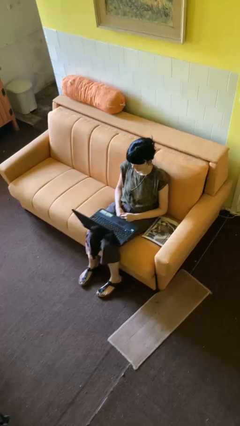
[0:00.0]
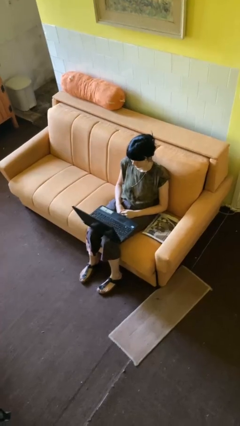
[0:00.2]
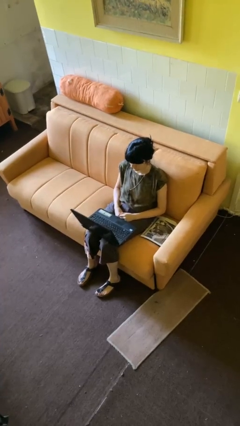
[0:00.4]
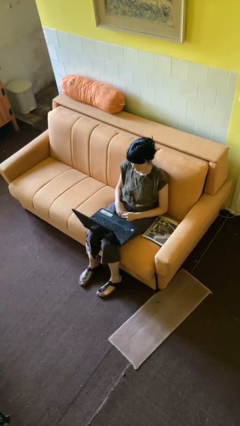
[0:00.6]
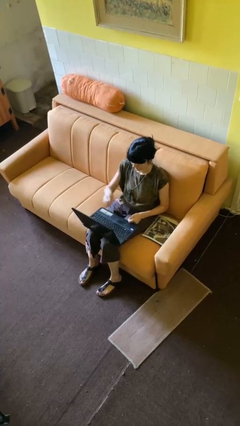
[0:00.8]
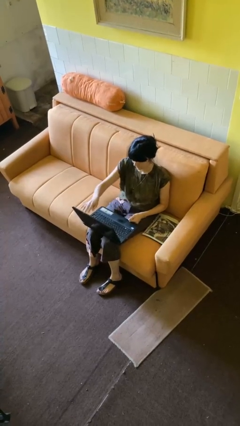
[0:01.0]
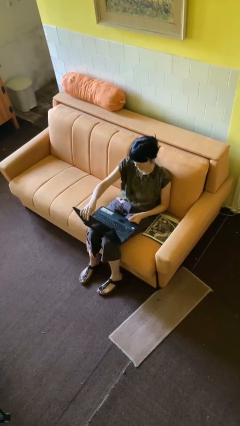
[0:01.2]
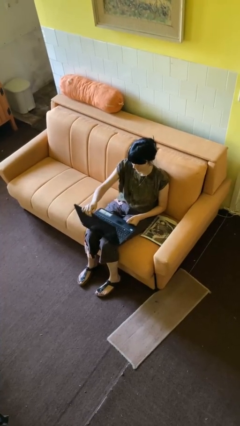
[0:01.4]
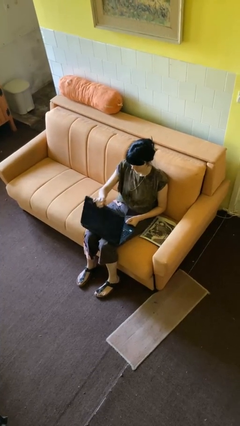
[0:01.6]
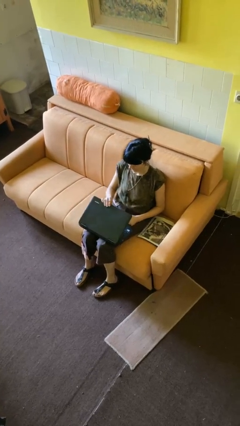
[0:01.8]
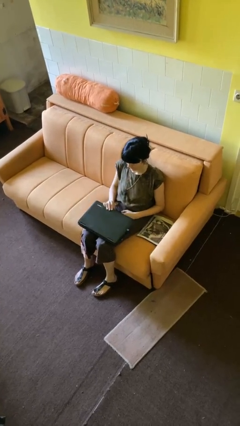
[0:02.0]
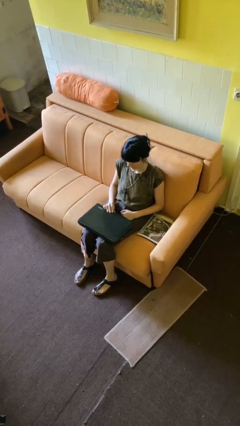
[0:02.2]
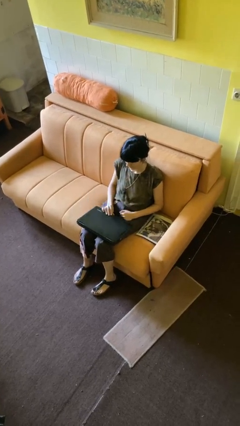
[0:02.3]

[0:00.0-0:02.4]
person closes laptop

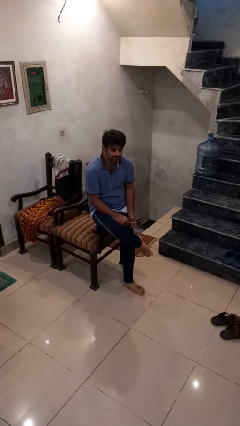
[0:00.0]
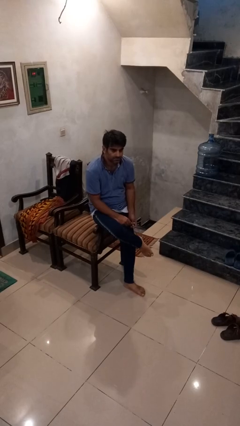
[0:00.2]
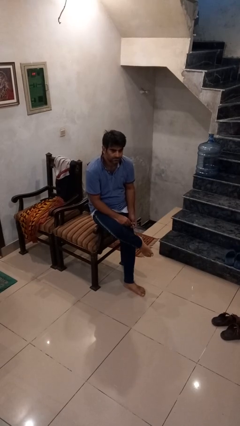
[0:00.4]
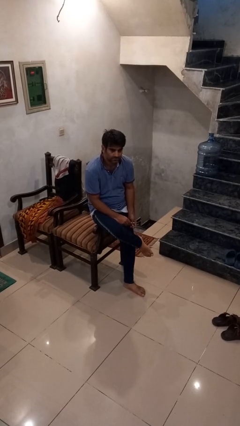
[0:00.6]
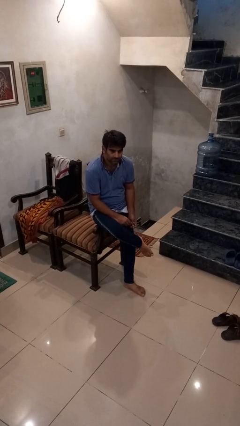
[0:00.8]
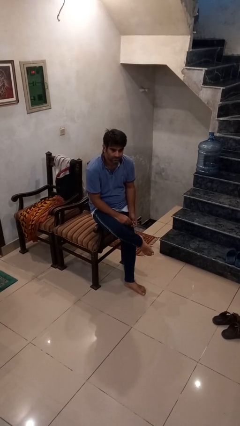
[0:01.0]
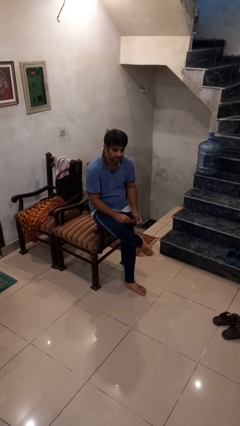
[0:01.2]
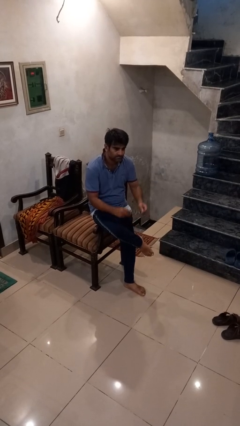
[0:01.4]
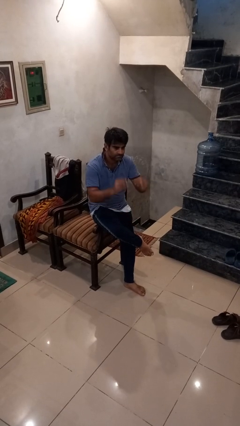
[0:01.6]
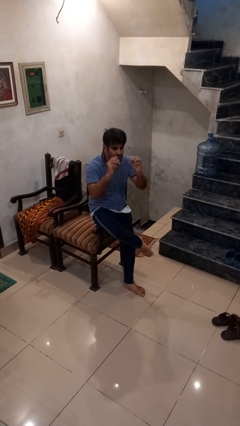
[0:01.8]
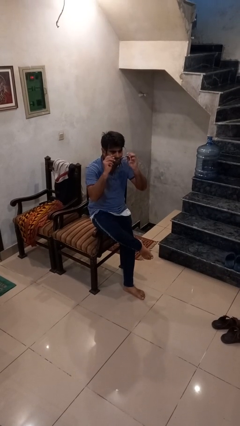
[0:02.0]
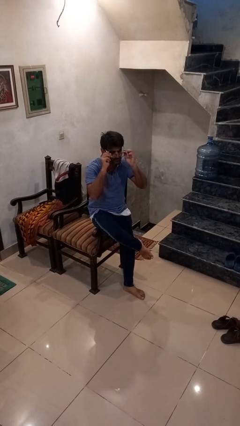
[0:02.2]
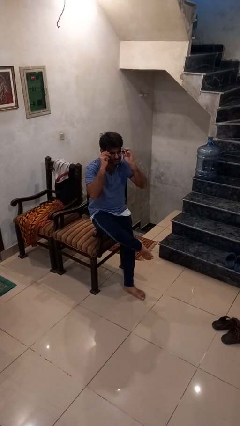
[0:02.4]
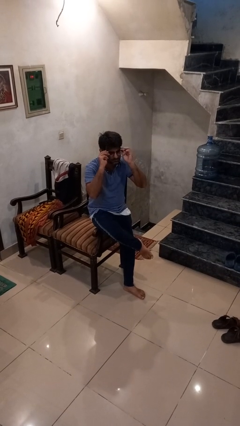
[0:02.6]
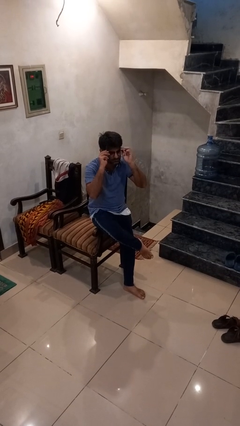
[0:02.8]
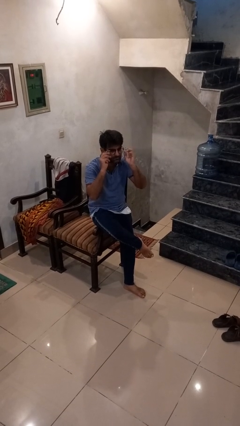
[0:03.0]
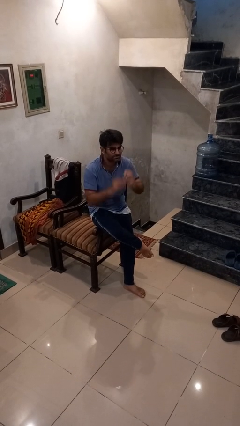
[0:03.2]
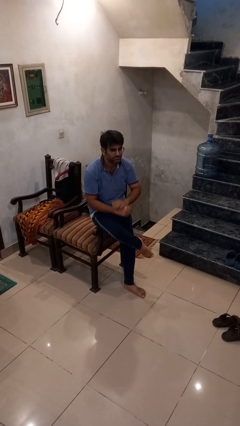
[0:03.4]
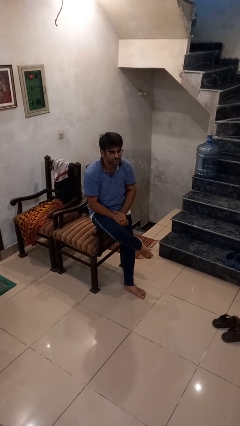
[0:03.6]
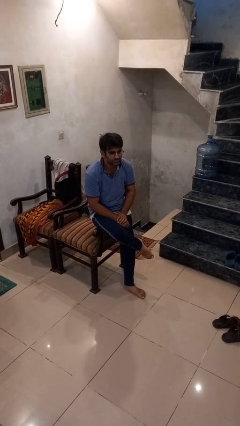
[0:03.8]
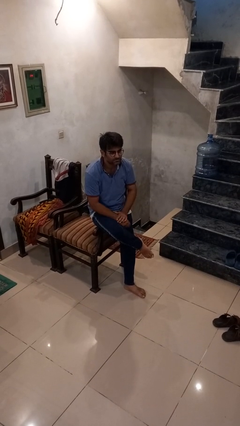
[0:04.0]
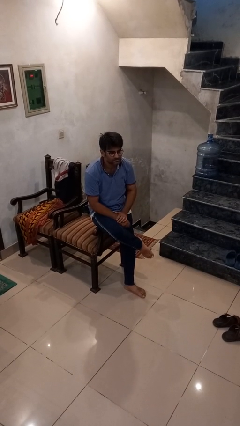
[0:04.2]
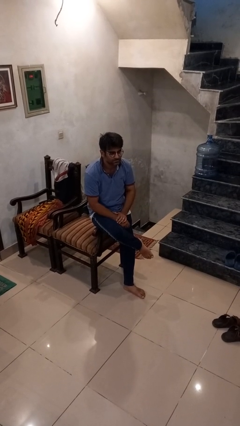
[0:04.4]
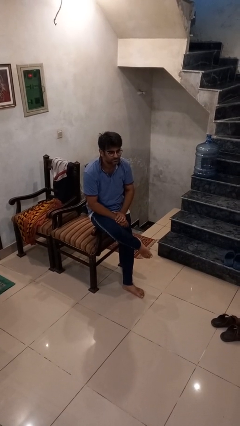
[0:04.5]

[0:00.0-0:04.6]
person puts on glasses

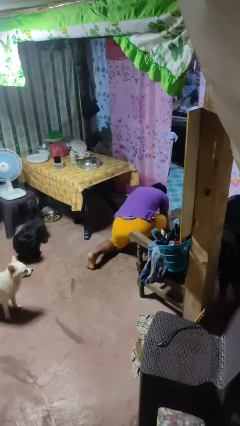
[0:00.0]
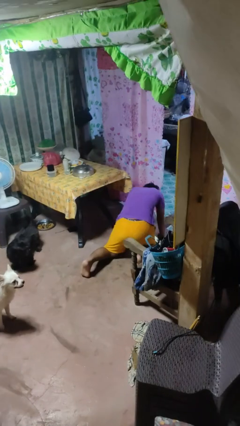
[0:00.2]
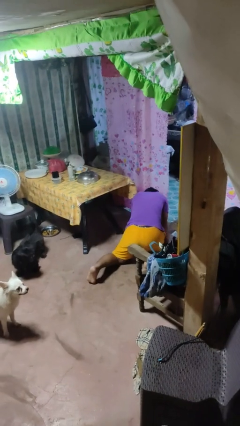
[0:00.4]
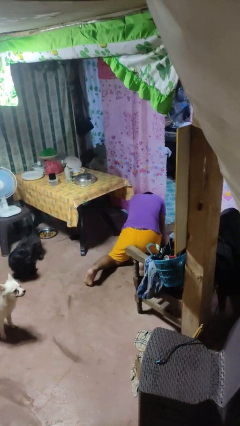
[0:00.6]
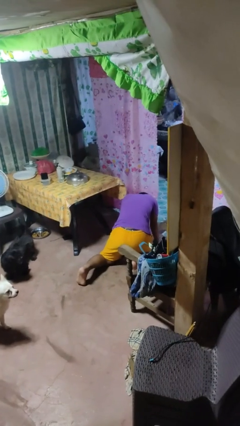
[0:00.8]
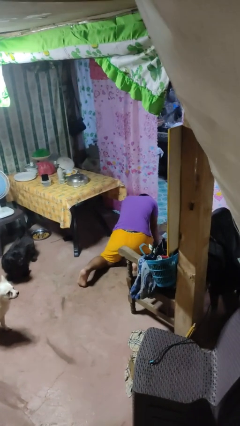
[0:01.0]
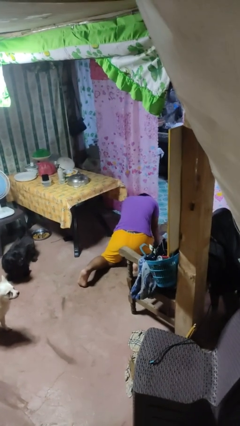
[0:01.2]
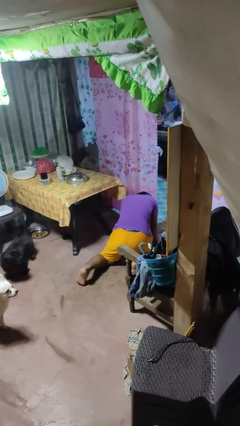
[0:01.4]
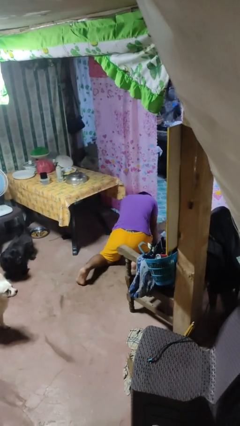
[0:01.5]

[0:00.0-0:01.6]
person lies down on floor

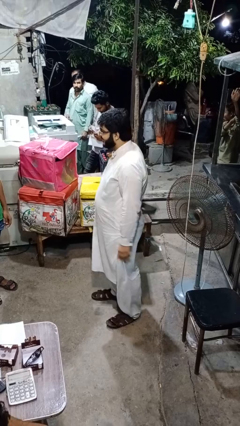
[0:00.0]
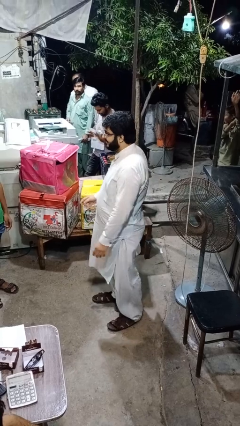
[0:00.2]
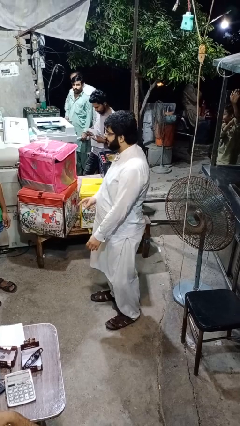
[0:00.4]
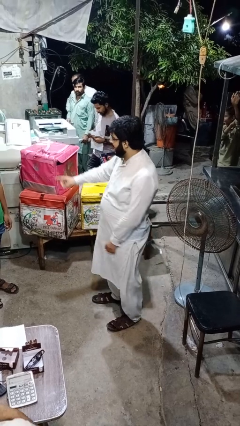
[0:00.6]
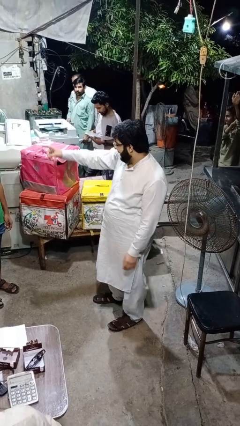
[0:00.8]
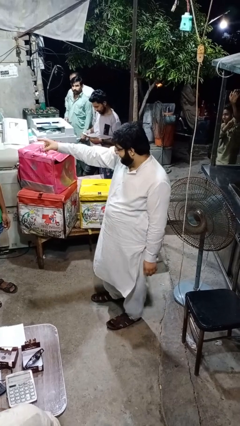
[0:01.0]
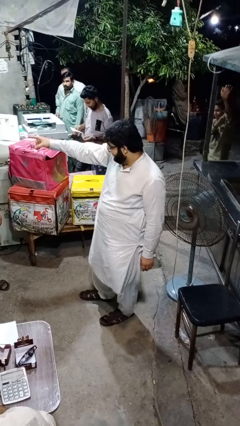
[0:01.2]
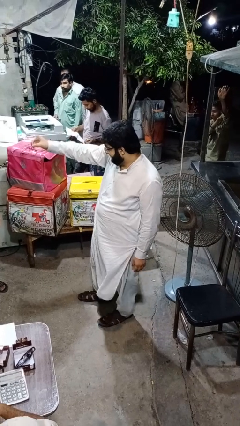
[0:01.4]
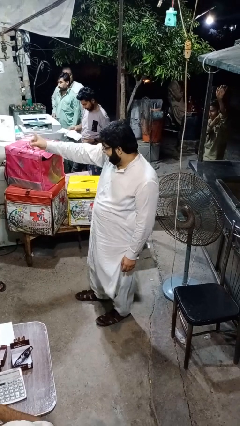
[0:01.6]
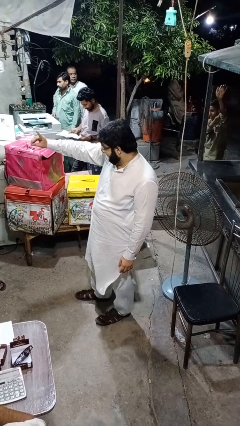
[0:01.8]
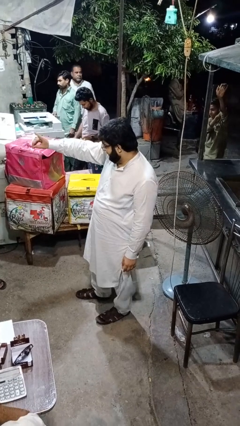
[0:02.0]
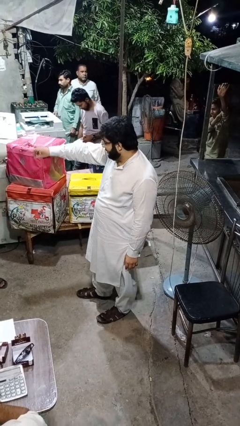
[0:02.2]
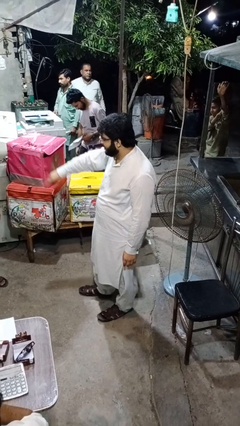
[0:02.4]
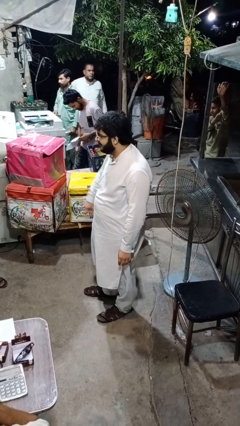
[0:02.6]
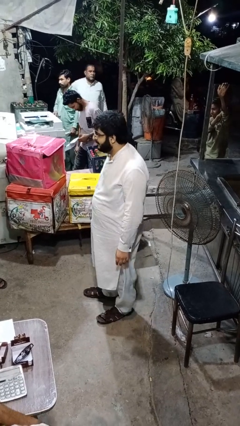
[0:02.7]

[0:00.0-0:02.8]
person points at person

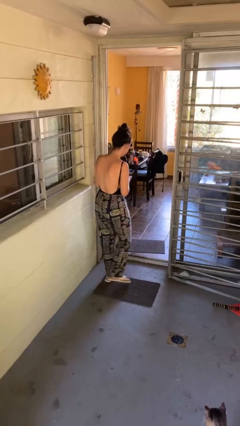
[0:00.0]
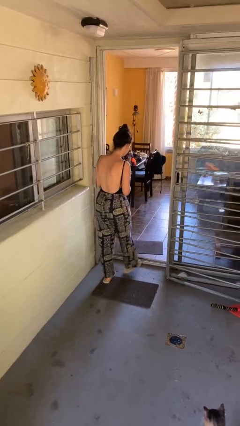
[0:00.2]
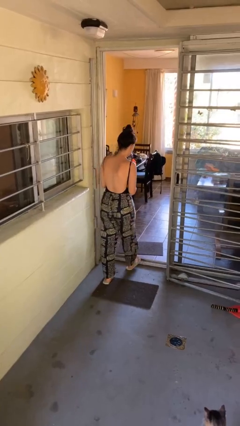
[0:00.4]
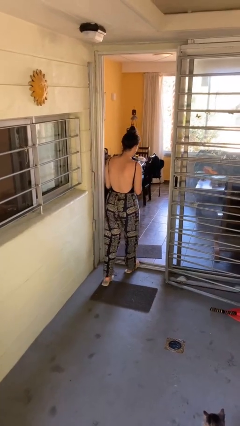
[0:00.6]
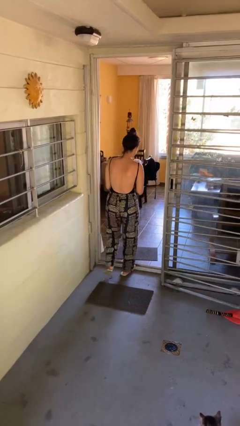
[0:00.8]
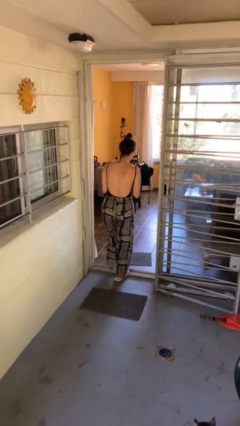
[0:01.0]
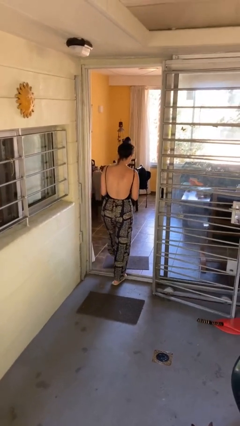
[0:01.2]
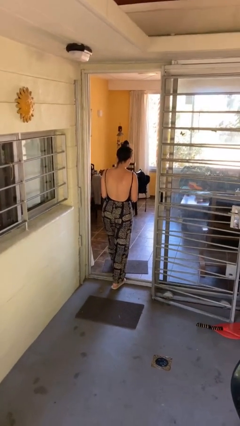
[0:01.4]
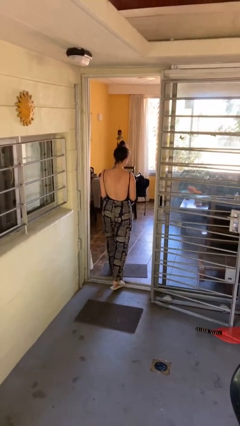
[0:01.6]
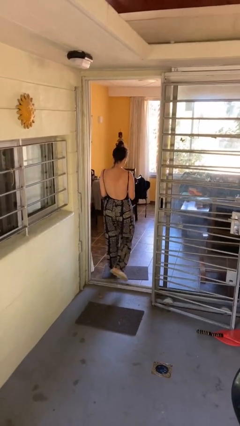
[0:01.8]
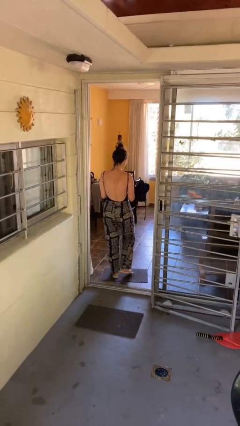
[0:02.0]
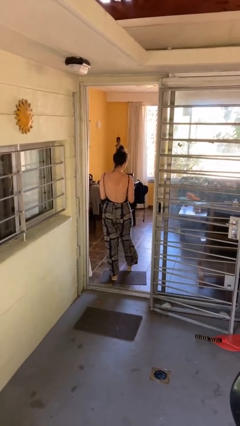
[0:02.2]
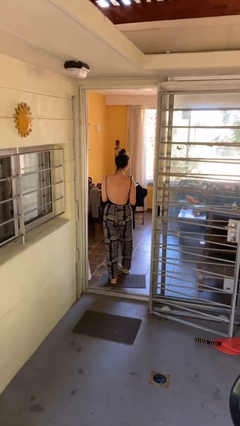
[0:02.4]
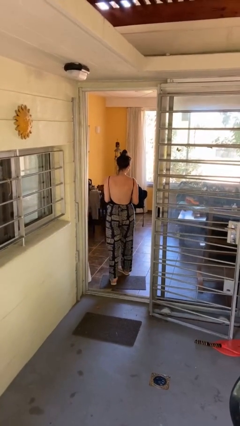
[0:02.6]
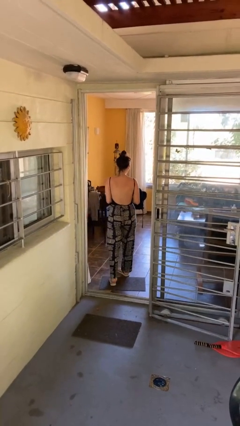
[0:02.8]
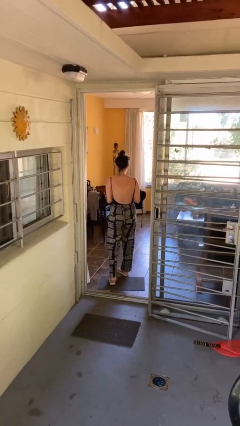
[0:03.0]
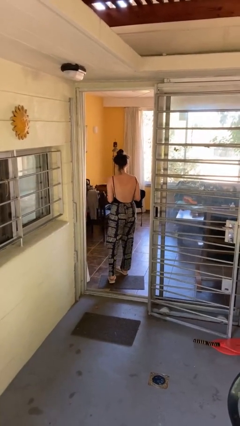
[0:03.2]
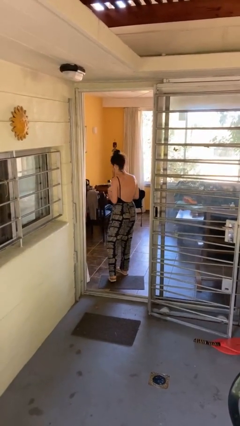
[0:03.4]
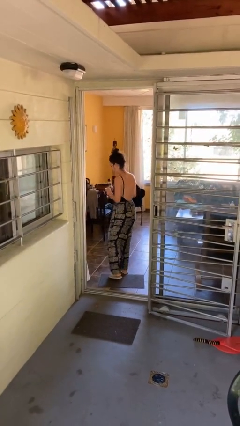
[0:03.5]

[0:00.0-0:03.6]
person exits scene through structure

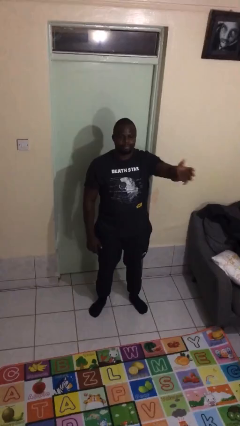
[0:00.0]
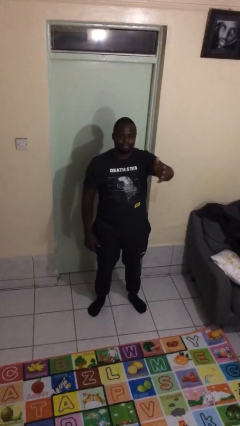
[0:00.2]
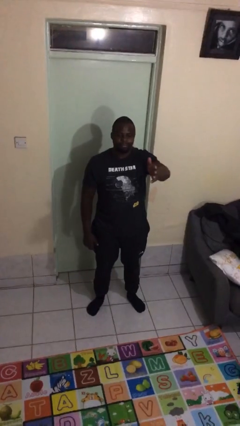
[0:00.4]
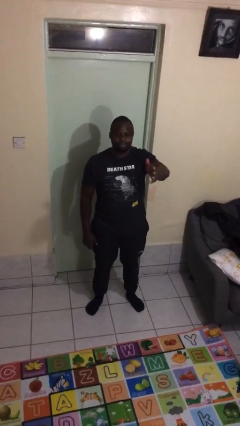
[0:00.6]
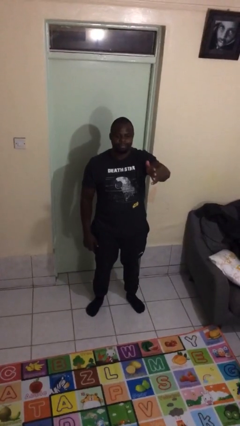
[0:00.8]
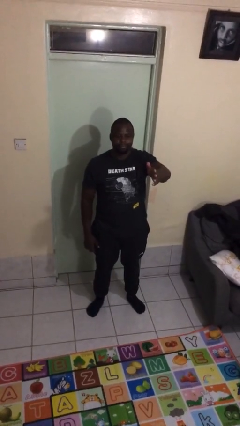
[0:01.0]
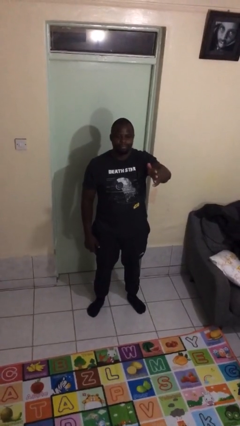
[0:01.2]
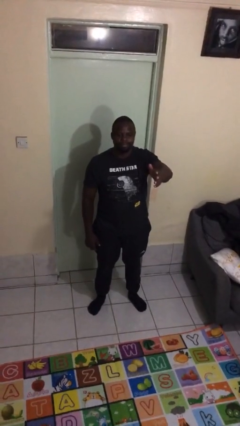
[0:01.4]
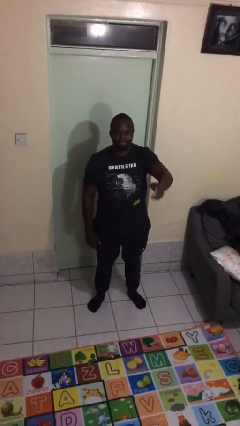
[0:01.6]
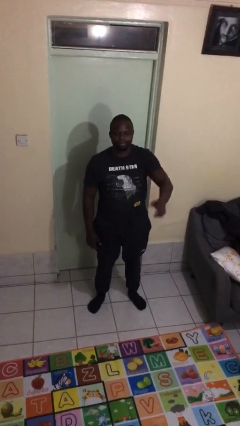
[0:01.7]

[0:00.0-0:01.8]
person gestures swipe right

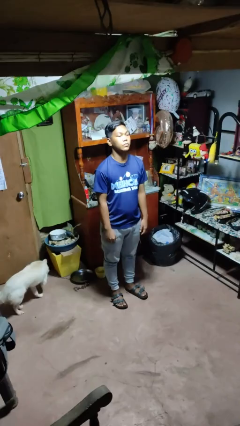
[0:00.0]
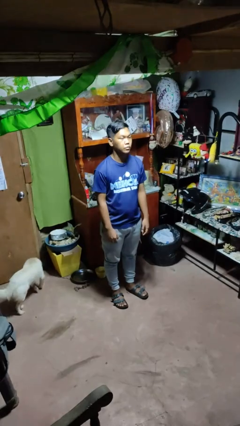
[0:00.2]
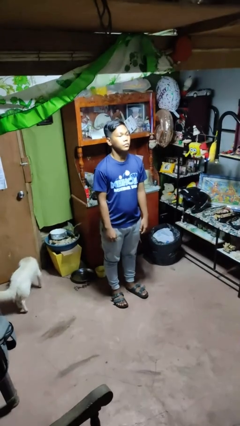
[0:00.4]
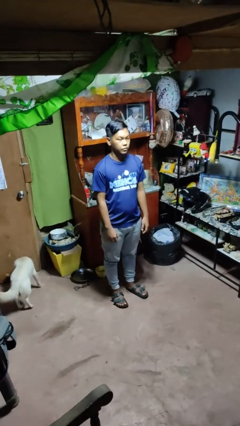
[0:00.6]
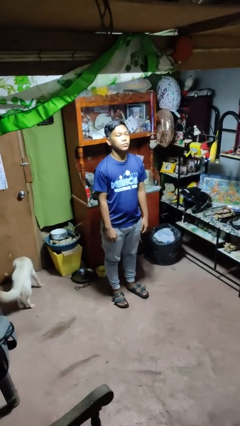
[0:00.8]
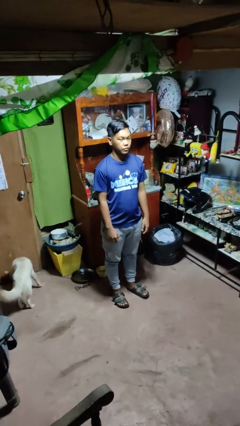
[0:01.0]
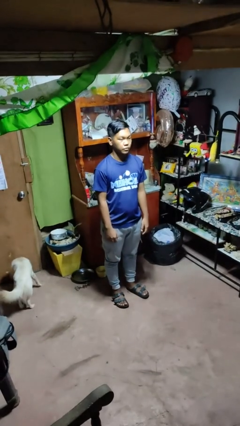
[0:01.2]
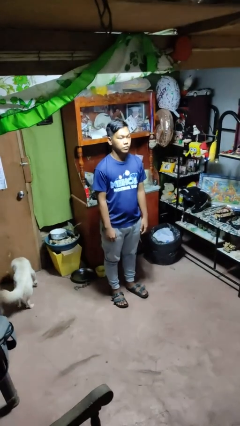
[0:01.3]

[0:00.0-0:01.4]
person nods head
